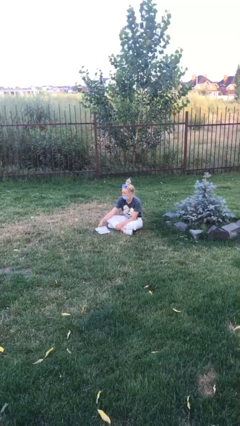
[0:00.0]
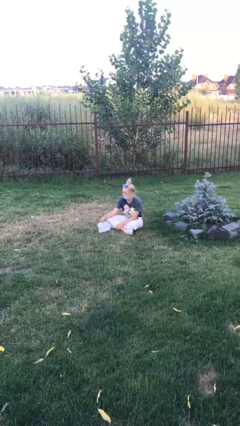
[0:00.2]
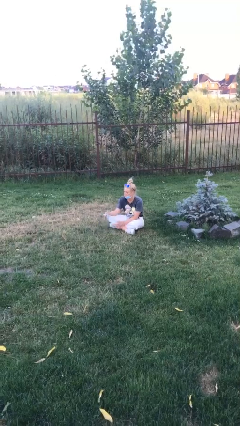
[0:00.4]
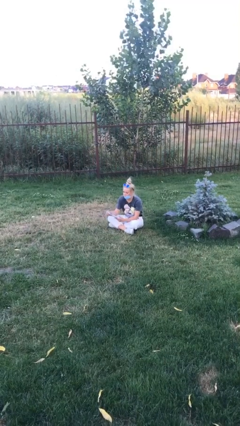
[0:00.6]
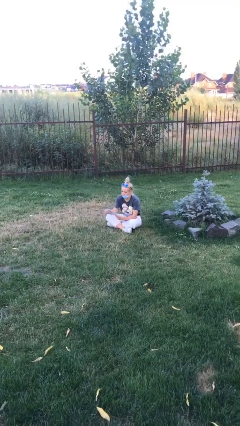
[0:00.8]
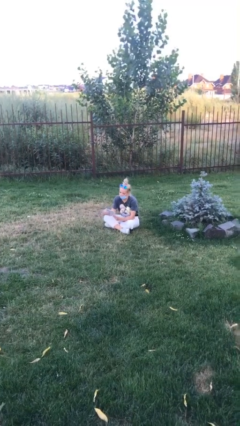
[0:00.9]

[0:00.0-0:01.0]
person picks up object from floor

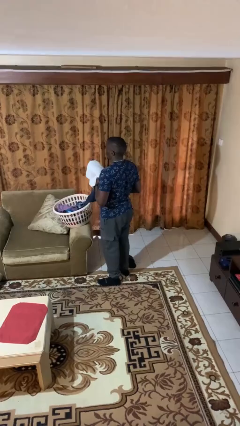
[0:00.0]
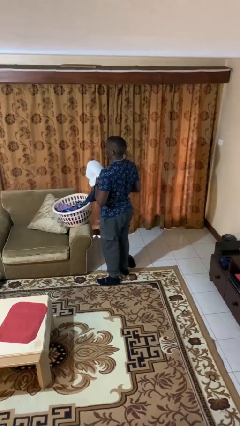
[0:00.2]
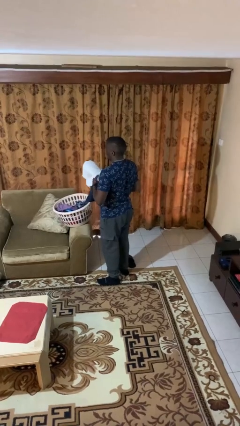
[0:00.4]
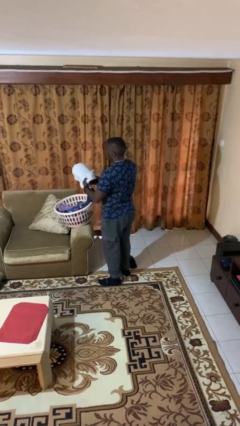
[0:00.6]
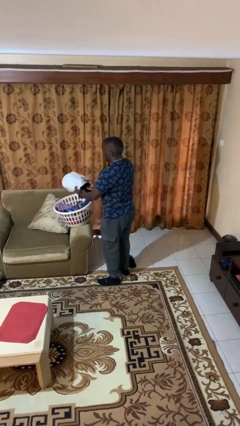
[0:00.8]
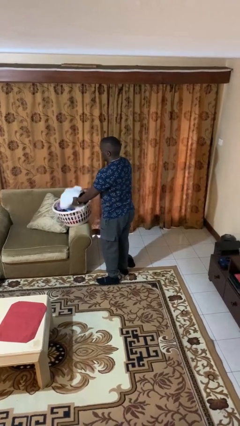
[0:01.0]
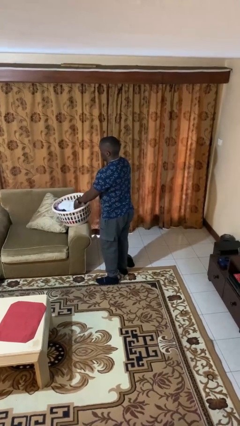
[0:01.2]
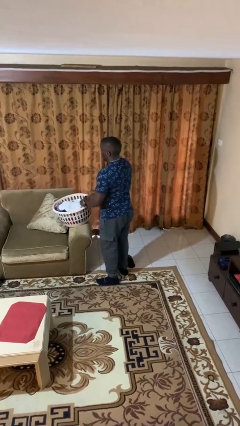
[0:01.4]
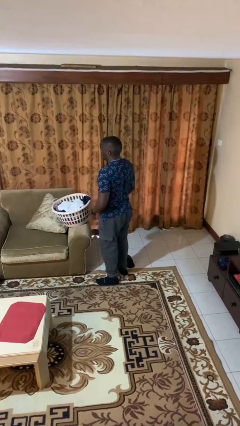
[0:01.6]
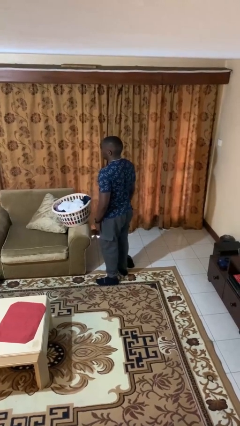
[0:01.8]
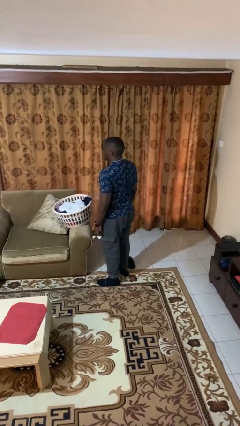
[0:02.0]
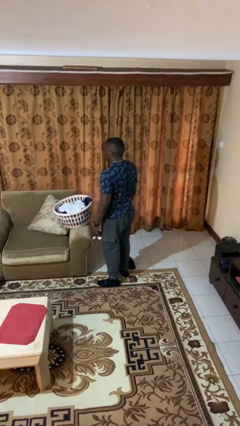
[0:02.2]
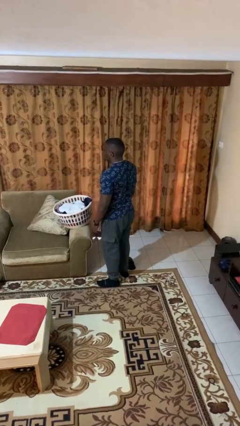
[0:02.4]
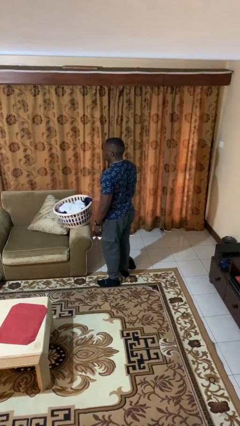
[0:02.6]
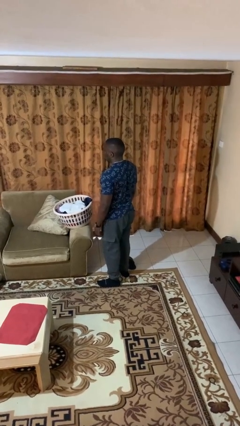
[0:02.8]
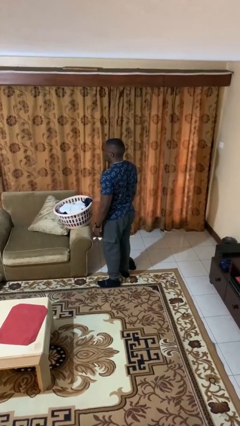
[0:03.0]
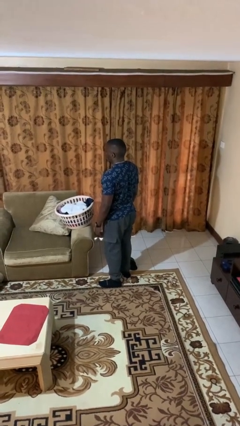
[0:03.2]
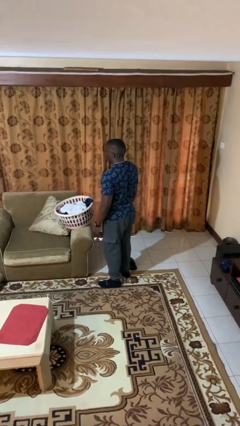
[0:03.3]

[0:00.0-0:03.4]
person puts object into basket

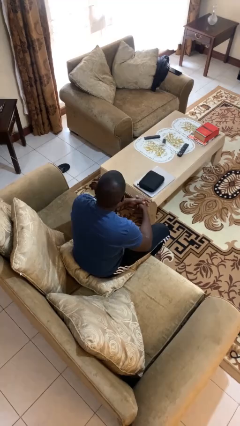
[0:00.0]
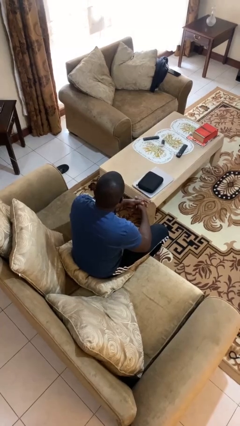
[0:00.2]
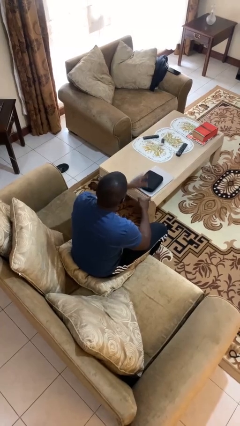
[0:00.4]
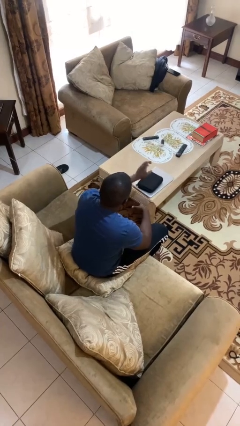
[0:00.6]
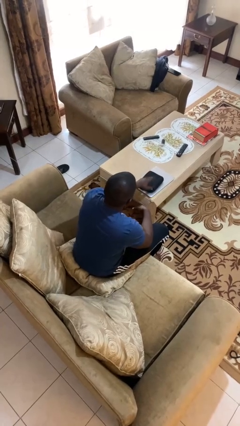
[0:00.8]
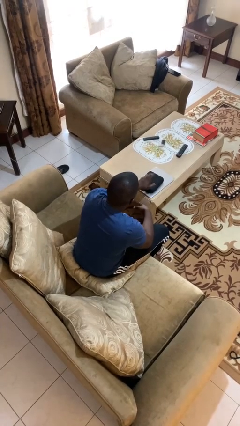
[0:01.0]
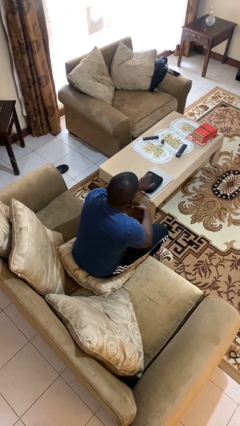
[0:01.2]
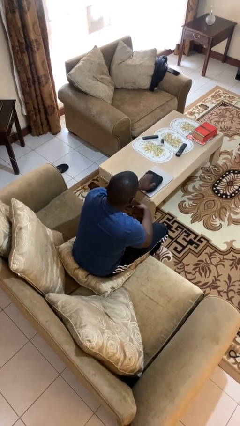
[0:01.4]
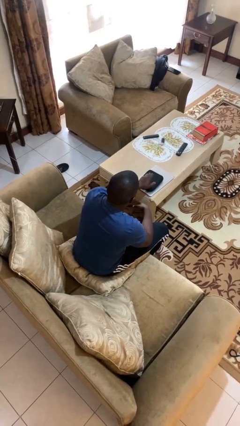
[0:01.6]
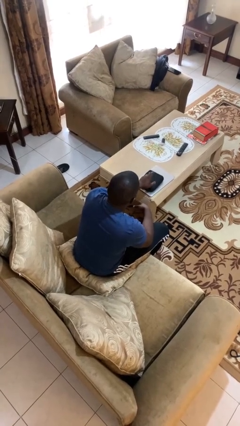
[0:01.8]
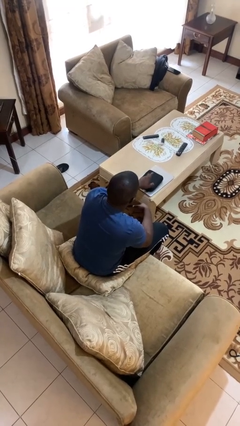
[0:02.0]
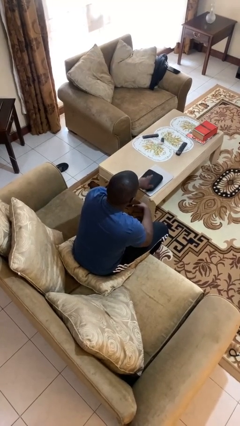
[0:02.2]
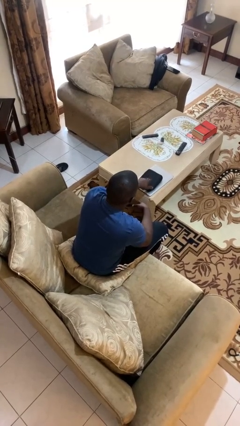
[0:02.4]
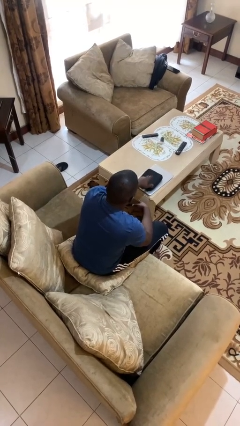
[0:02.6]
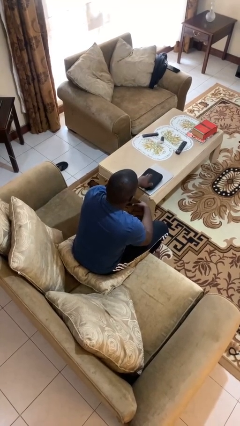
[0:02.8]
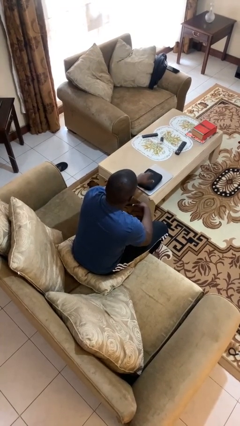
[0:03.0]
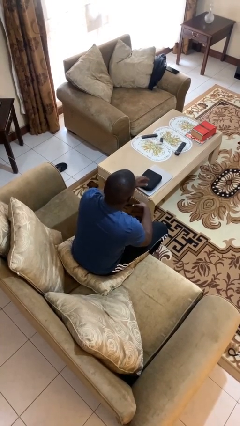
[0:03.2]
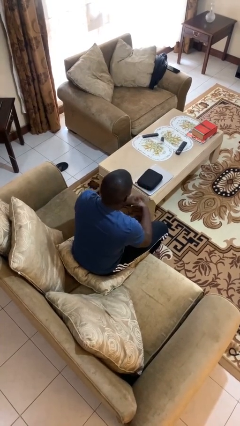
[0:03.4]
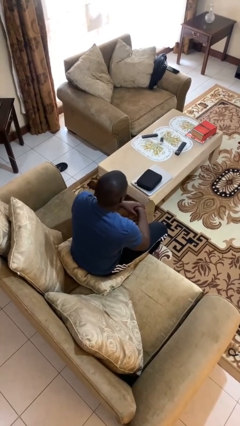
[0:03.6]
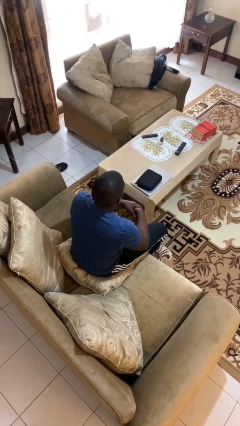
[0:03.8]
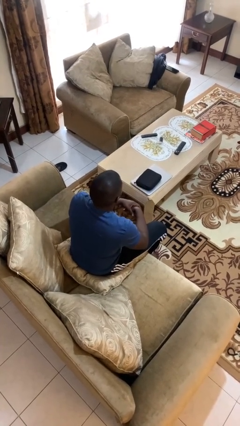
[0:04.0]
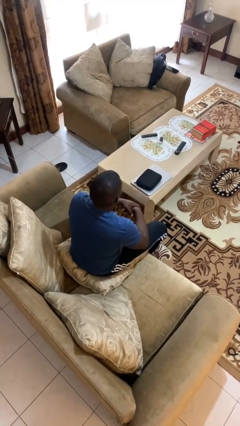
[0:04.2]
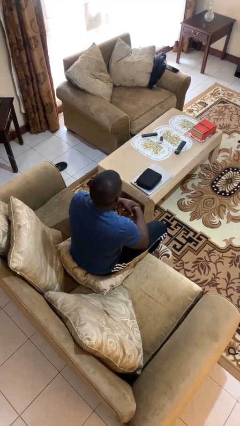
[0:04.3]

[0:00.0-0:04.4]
person taps object with finger

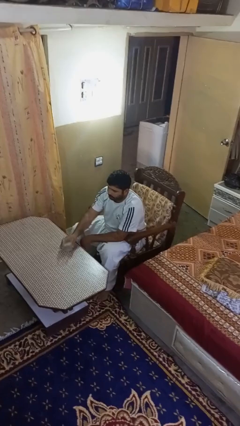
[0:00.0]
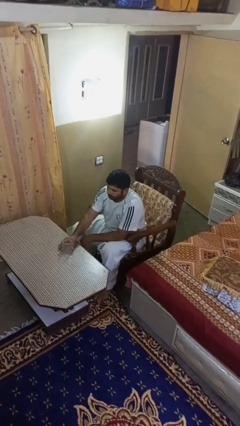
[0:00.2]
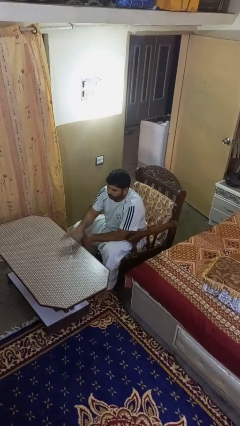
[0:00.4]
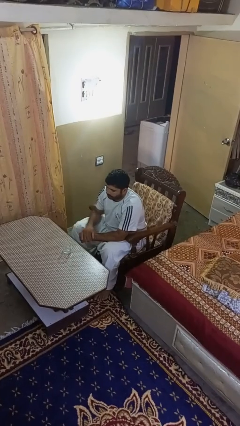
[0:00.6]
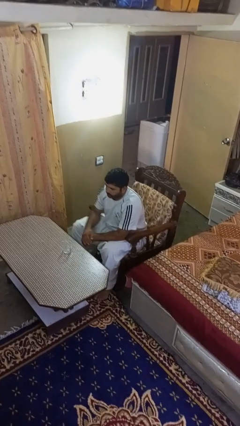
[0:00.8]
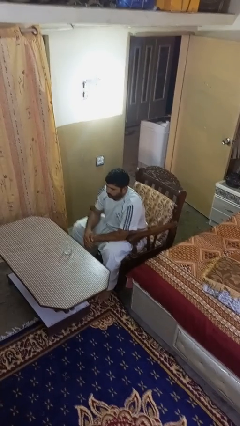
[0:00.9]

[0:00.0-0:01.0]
person puts down object on table

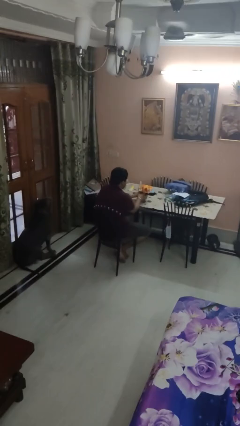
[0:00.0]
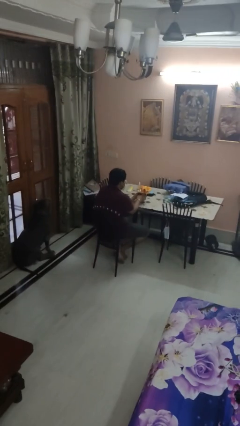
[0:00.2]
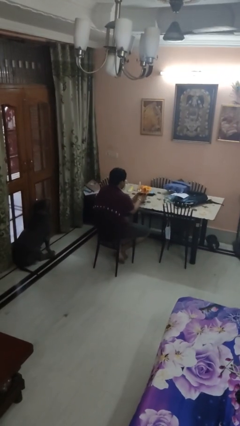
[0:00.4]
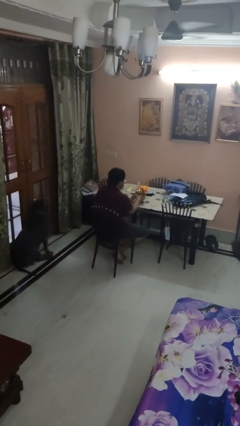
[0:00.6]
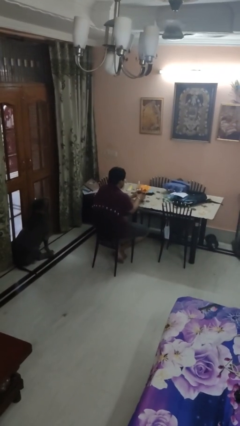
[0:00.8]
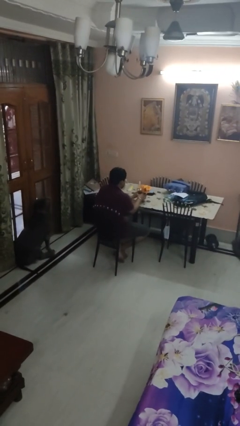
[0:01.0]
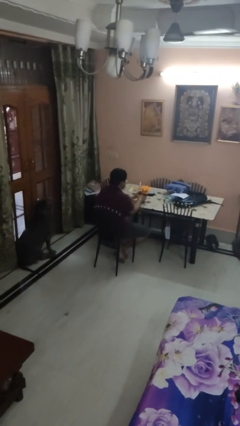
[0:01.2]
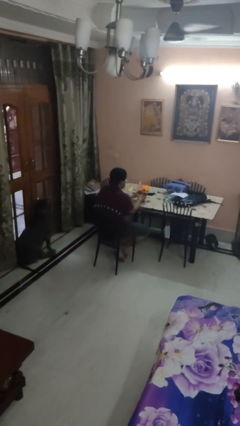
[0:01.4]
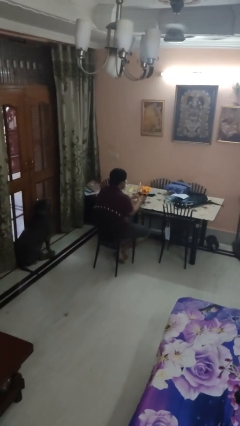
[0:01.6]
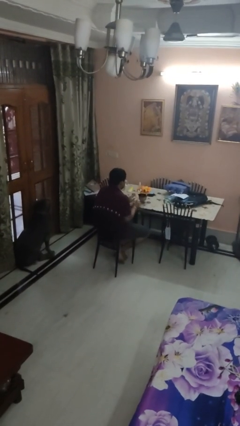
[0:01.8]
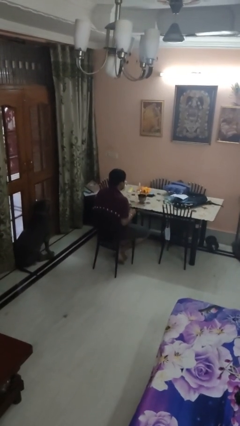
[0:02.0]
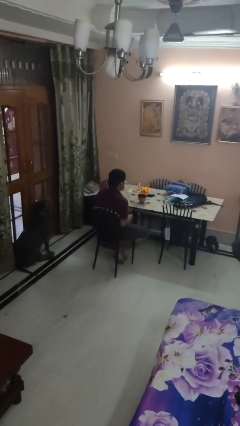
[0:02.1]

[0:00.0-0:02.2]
person arranges flowers in vase

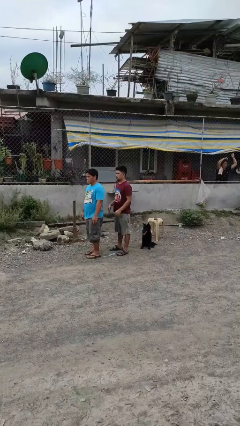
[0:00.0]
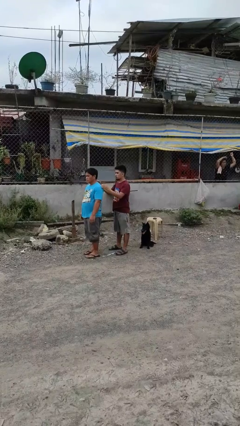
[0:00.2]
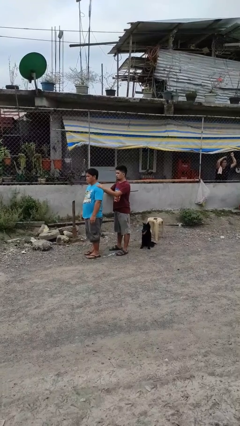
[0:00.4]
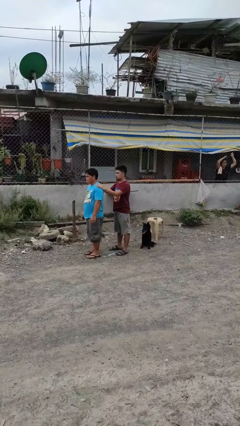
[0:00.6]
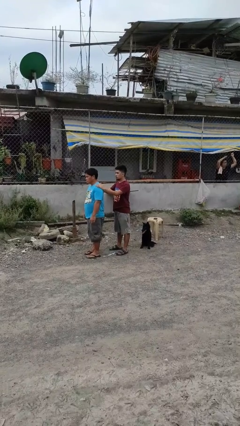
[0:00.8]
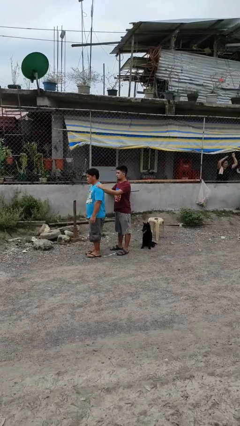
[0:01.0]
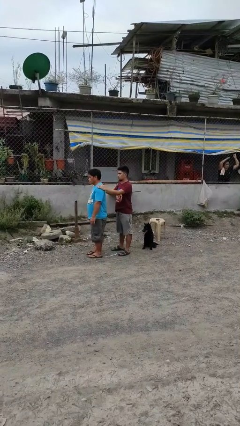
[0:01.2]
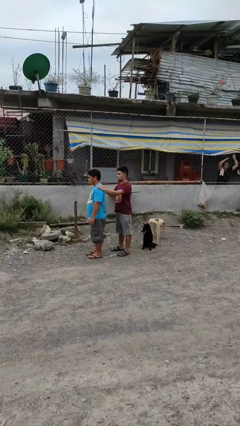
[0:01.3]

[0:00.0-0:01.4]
person grabs person by shoulder

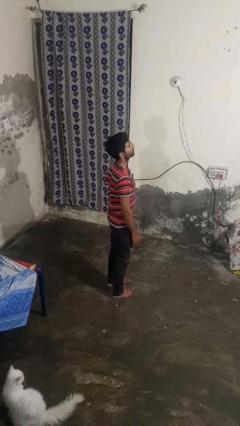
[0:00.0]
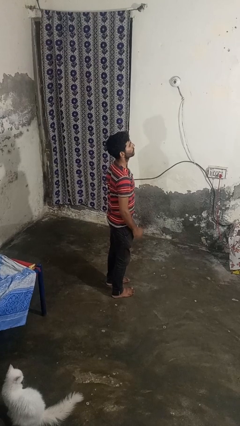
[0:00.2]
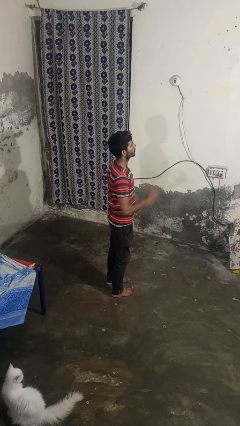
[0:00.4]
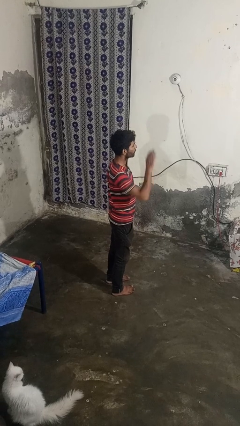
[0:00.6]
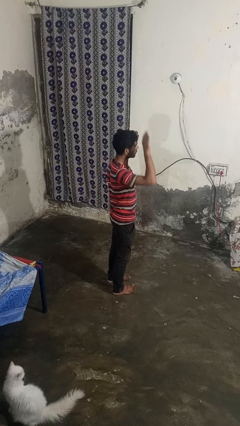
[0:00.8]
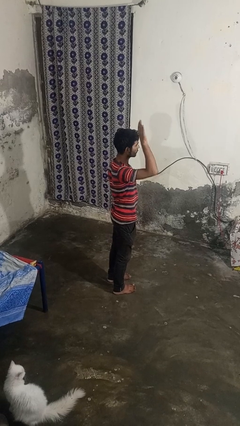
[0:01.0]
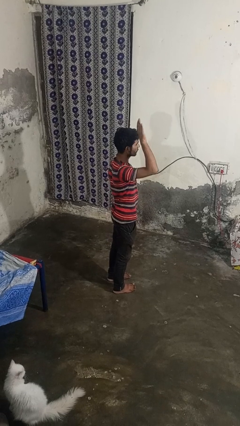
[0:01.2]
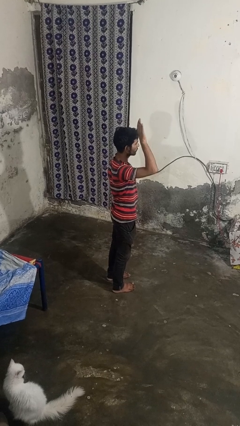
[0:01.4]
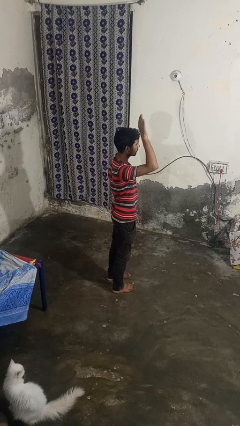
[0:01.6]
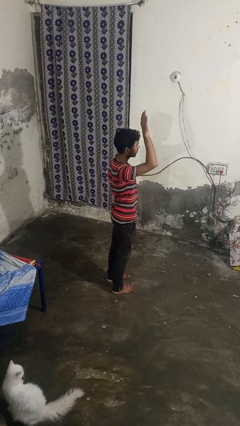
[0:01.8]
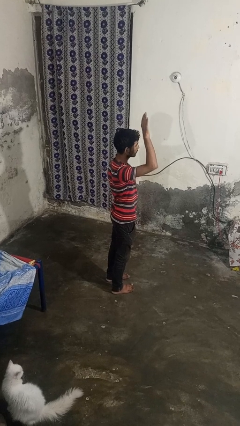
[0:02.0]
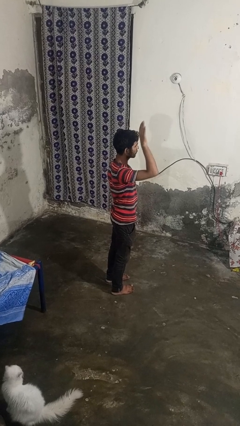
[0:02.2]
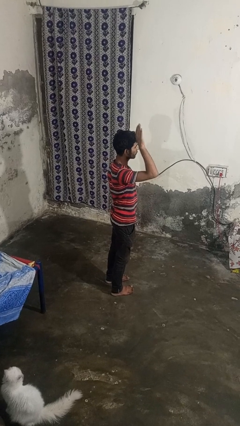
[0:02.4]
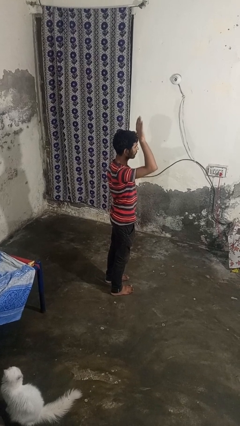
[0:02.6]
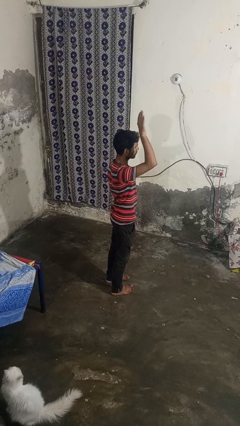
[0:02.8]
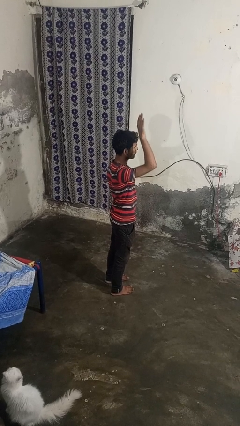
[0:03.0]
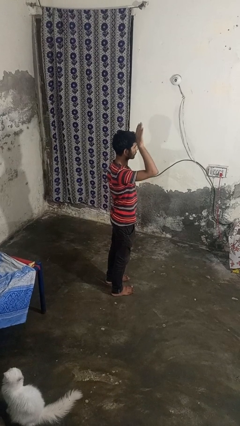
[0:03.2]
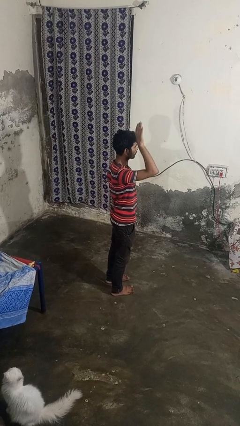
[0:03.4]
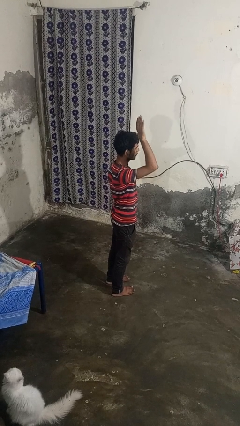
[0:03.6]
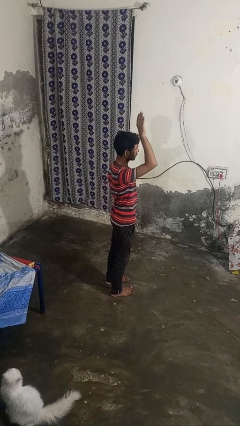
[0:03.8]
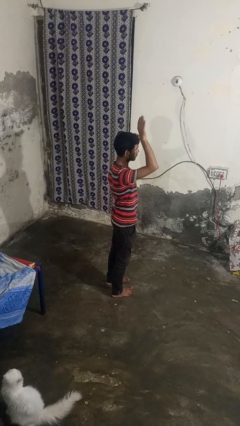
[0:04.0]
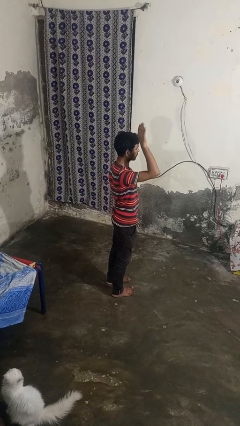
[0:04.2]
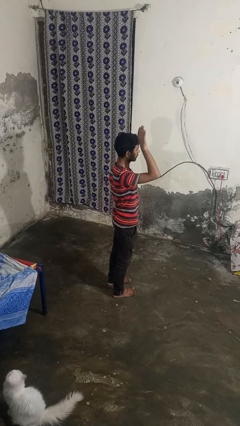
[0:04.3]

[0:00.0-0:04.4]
person gestures raise hand
